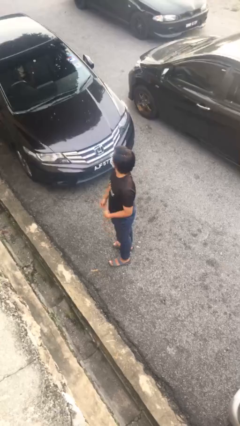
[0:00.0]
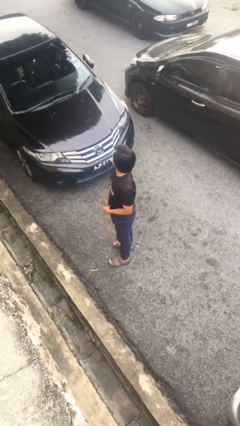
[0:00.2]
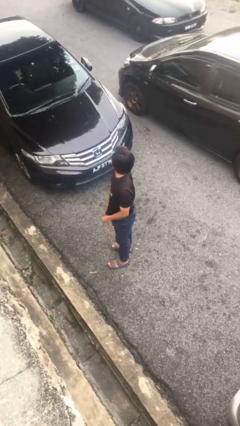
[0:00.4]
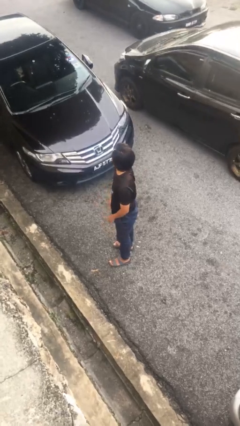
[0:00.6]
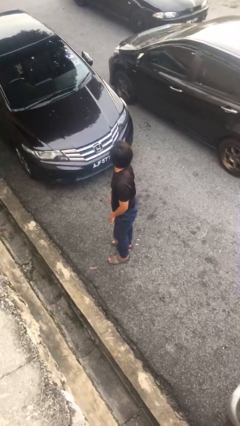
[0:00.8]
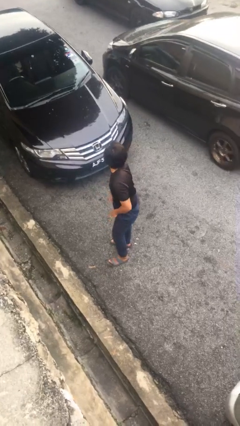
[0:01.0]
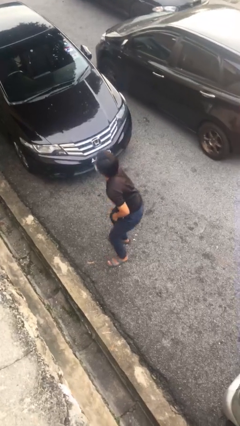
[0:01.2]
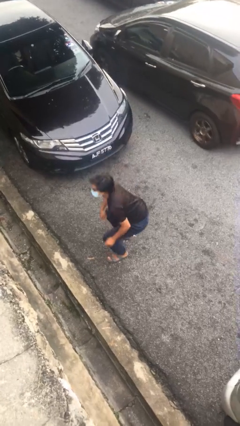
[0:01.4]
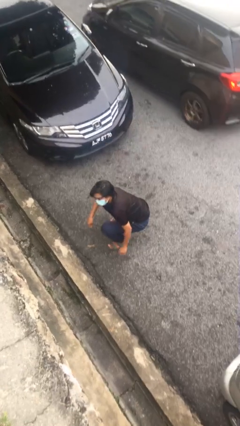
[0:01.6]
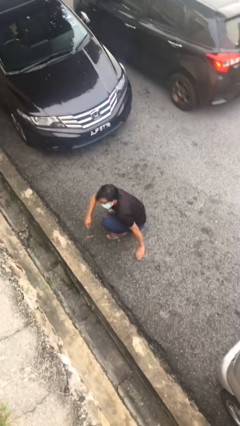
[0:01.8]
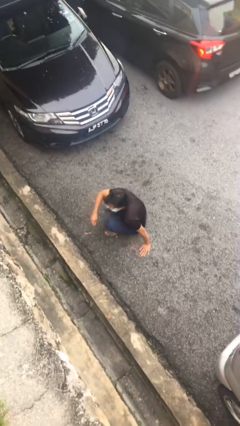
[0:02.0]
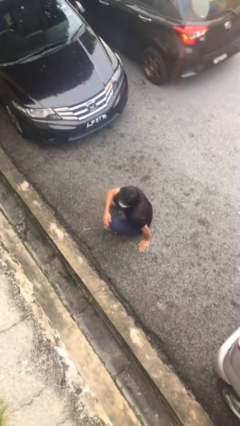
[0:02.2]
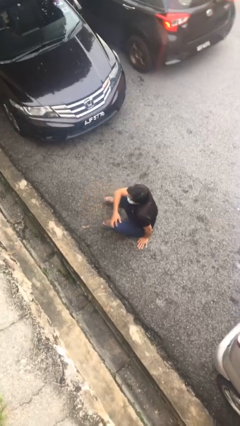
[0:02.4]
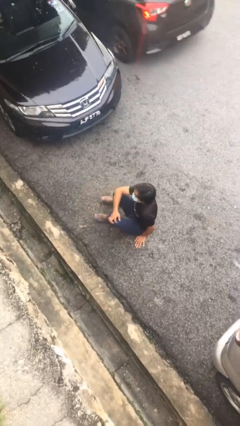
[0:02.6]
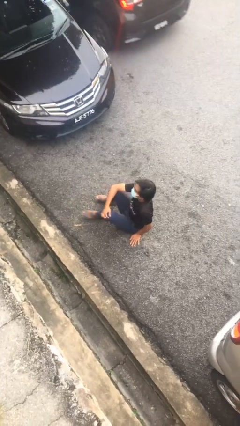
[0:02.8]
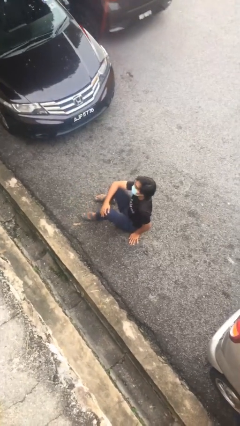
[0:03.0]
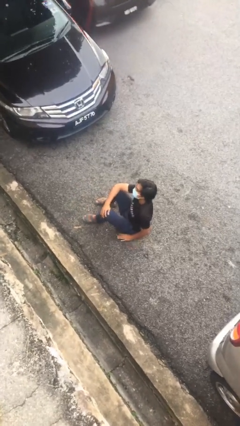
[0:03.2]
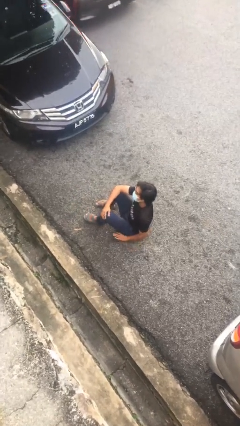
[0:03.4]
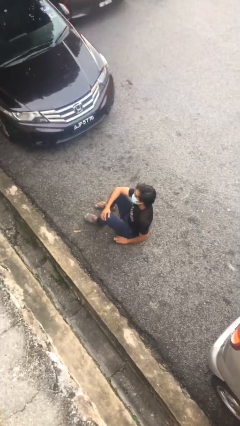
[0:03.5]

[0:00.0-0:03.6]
person sits down

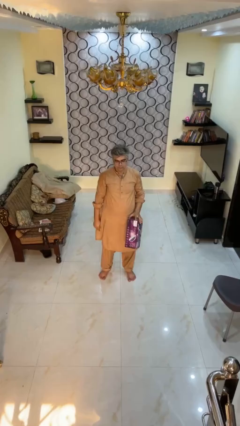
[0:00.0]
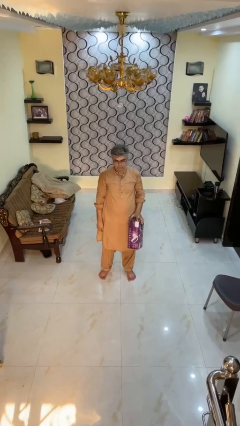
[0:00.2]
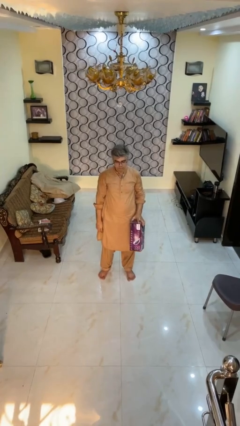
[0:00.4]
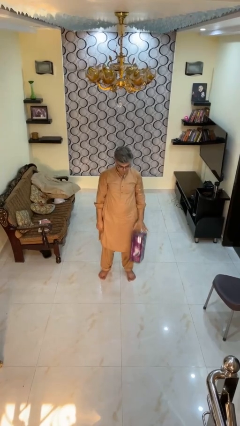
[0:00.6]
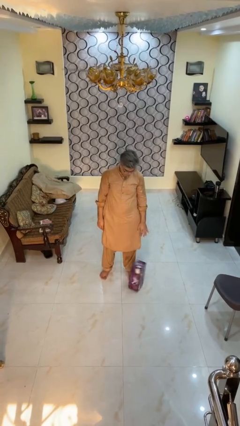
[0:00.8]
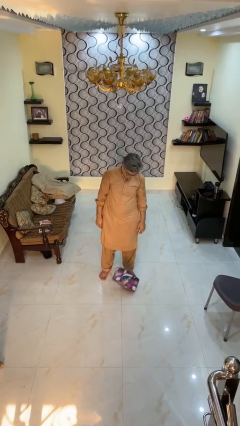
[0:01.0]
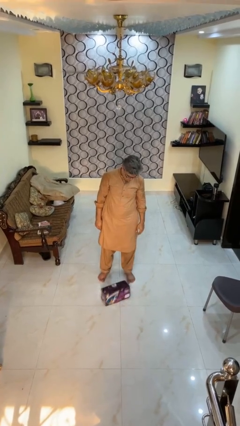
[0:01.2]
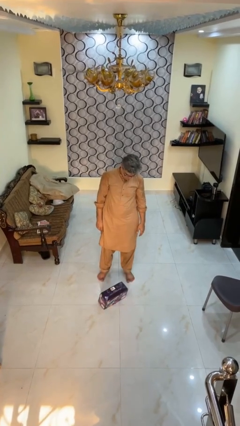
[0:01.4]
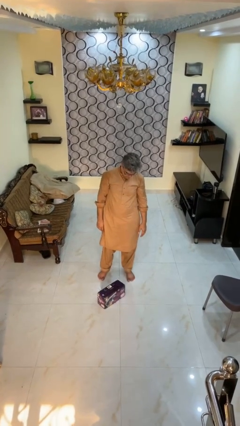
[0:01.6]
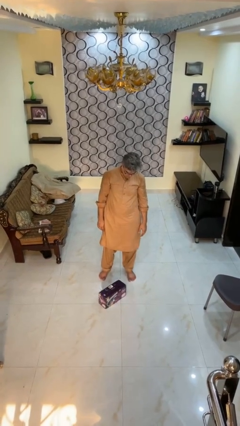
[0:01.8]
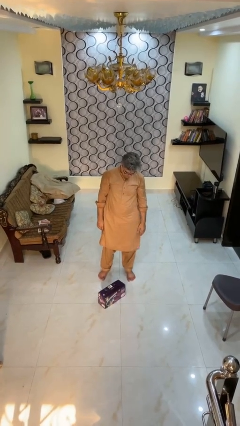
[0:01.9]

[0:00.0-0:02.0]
person drops object

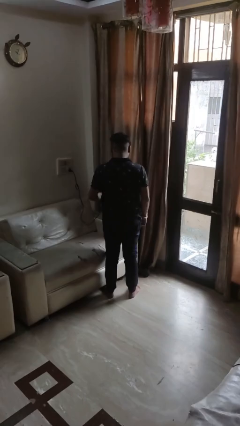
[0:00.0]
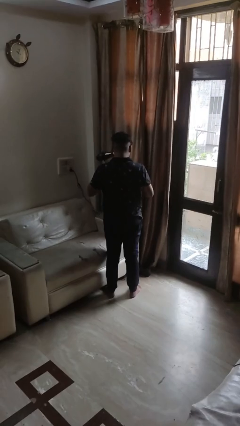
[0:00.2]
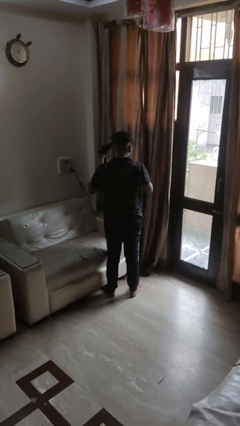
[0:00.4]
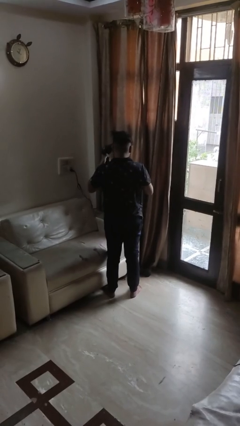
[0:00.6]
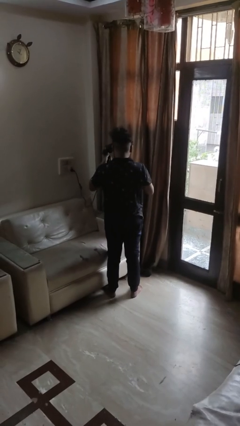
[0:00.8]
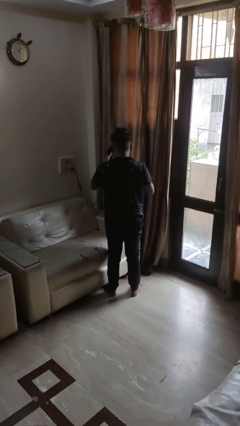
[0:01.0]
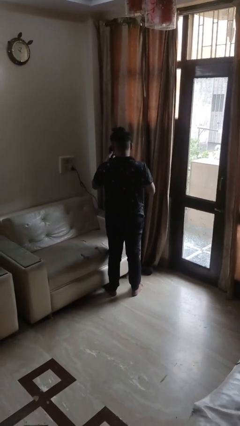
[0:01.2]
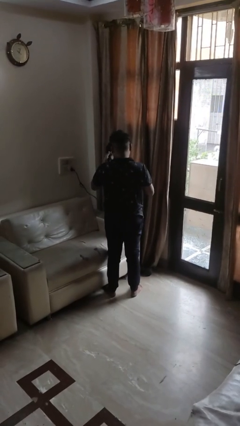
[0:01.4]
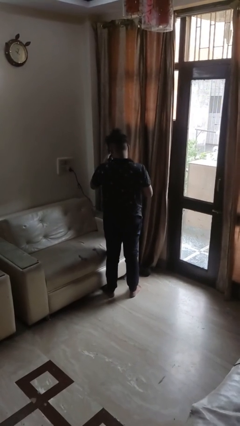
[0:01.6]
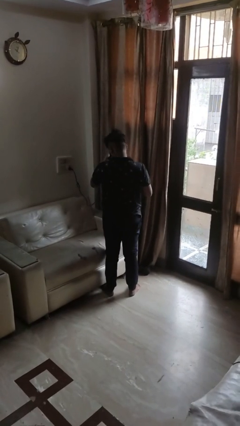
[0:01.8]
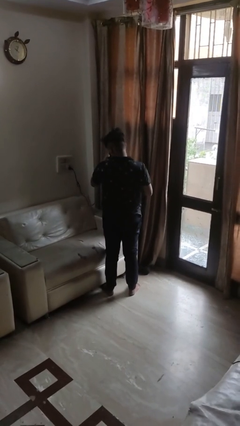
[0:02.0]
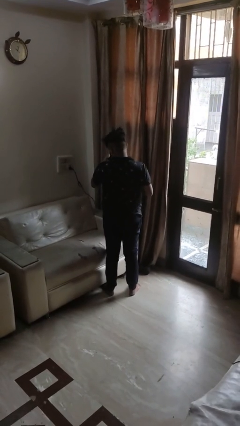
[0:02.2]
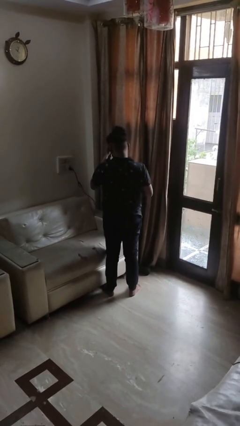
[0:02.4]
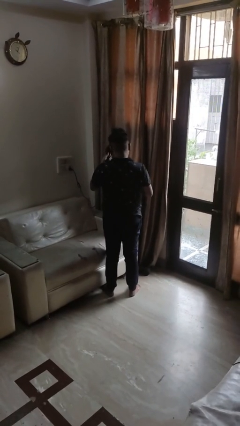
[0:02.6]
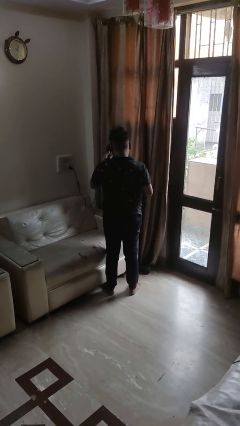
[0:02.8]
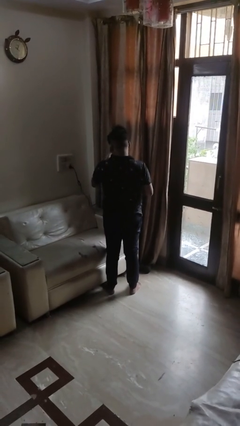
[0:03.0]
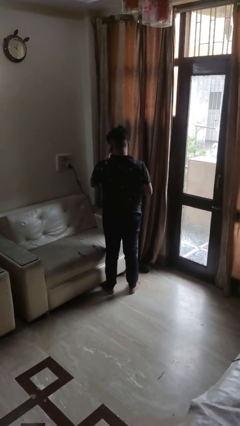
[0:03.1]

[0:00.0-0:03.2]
person dries hair with hairdryer

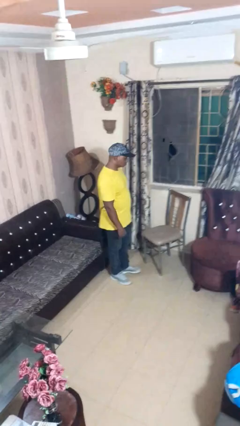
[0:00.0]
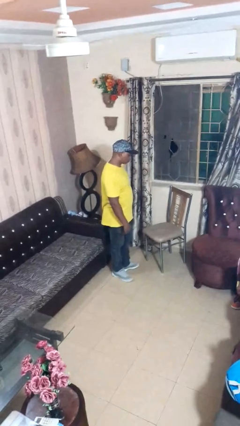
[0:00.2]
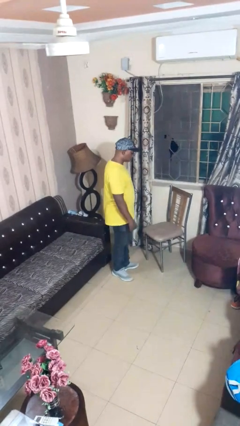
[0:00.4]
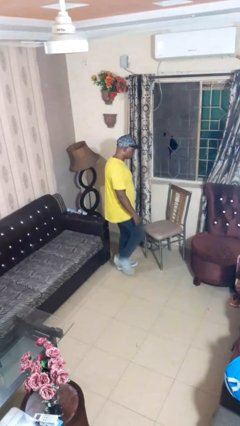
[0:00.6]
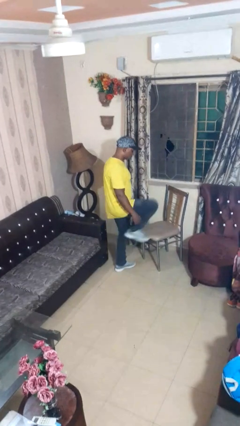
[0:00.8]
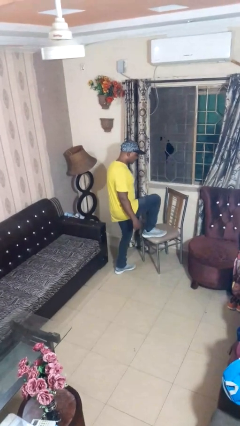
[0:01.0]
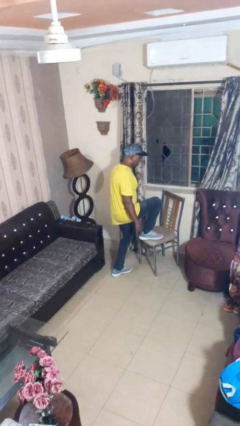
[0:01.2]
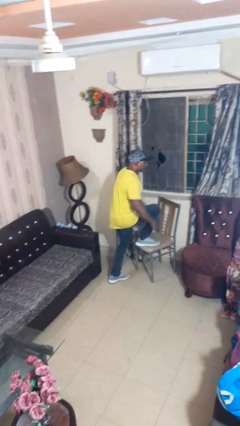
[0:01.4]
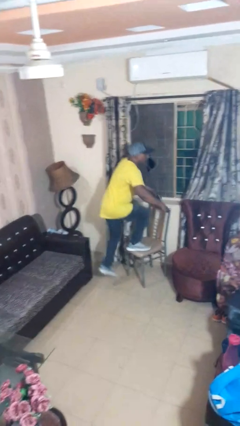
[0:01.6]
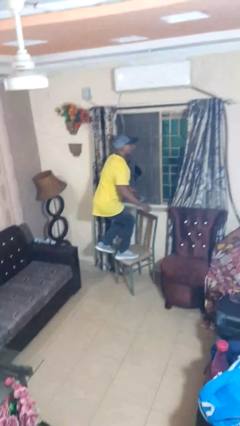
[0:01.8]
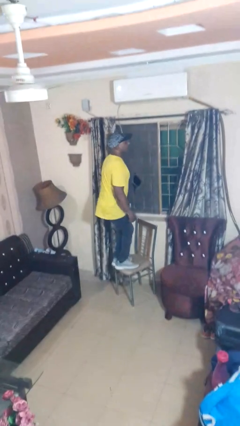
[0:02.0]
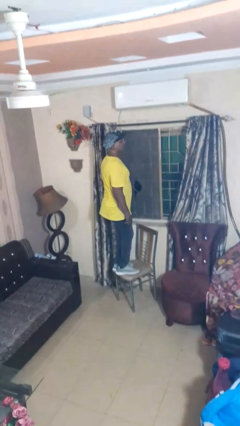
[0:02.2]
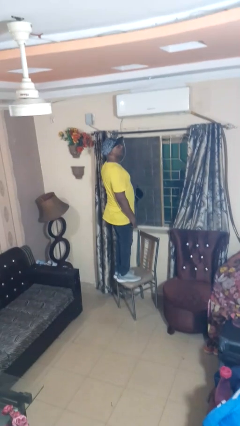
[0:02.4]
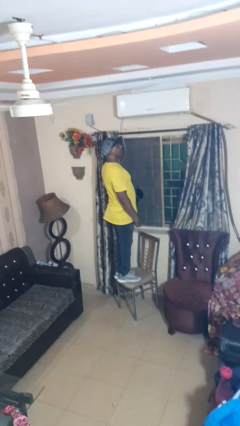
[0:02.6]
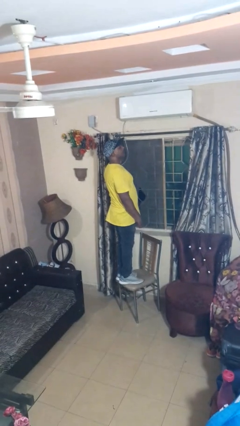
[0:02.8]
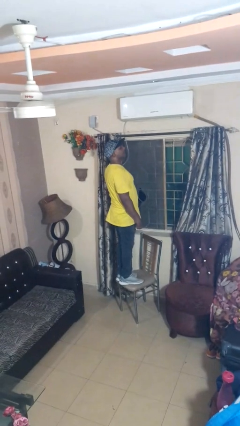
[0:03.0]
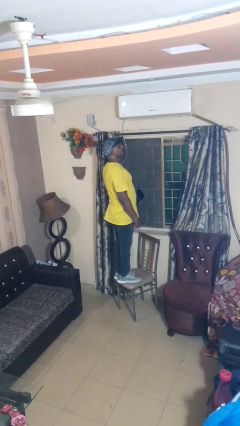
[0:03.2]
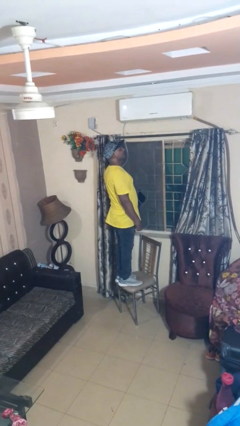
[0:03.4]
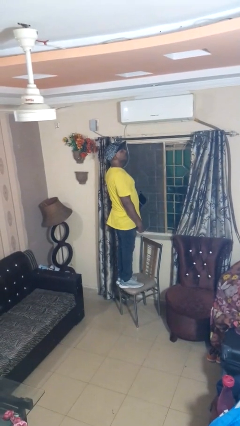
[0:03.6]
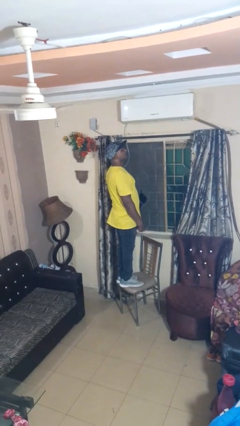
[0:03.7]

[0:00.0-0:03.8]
person climbs on chair

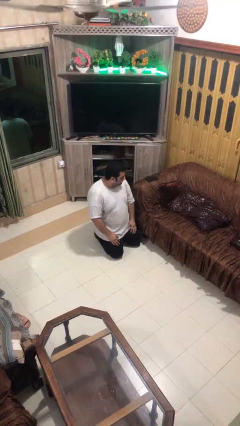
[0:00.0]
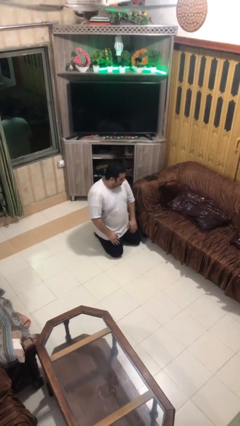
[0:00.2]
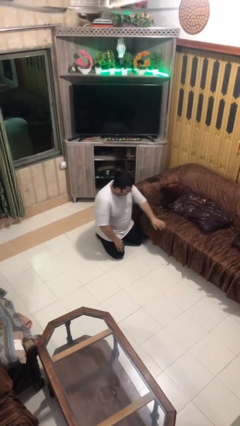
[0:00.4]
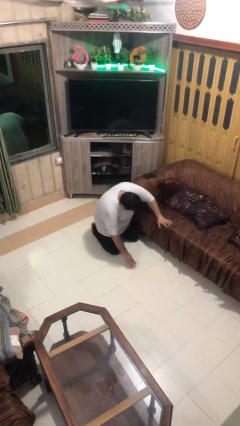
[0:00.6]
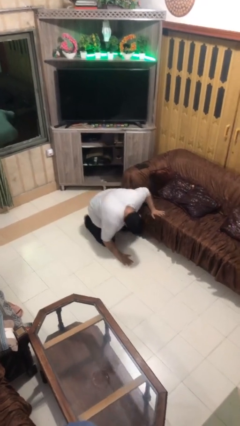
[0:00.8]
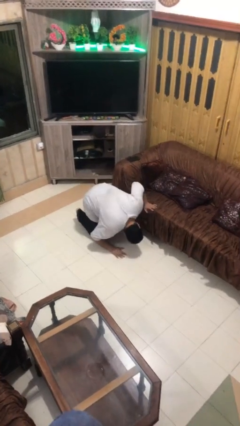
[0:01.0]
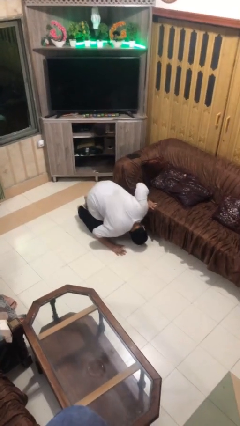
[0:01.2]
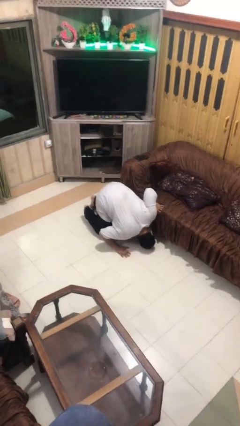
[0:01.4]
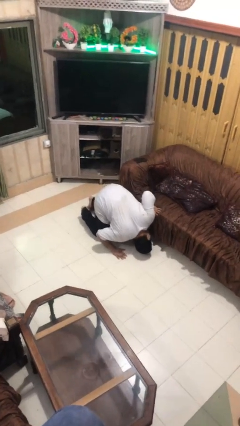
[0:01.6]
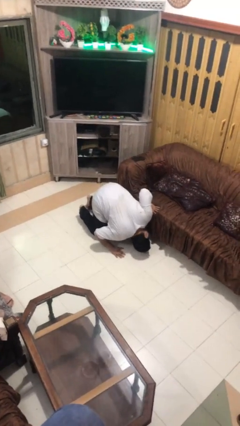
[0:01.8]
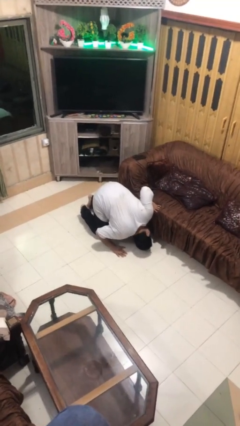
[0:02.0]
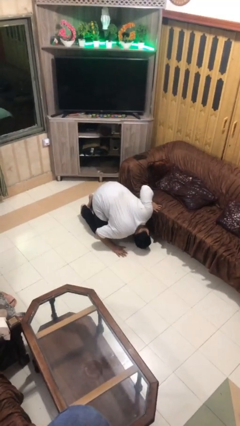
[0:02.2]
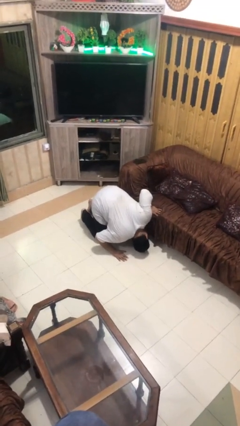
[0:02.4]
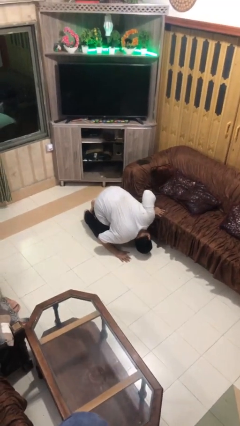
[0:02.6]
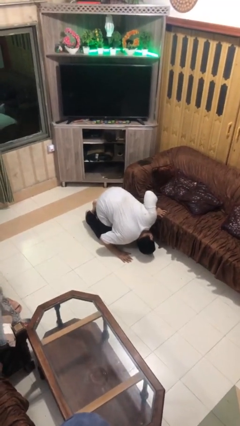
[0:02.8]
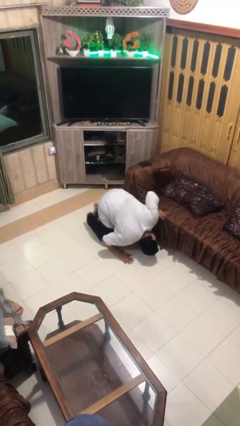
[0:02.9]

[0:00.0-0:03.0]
person searches under couch

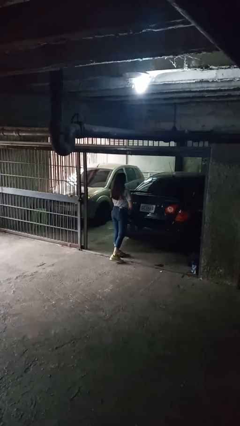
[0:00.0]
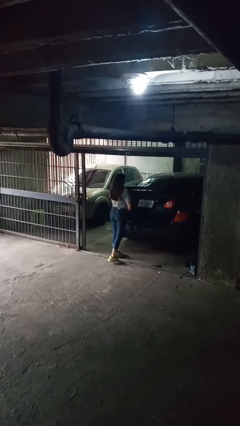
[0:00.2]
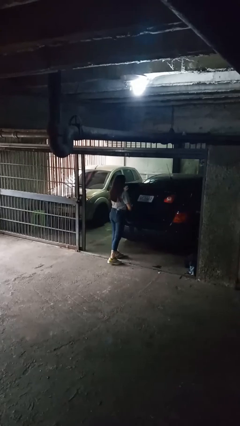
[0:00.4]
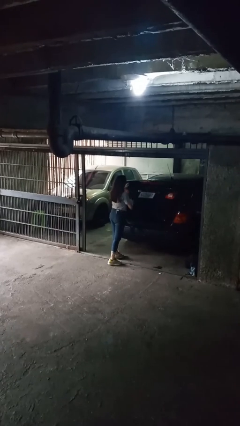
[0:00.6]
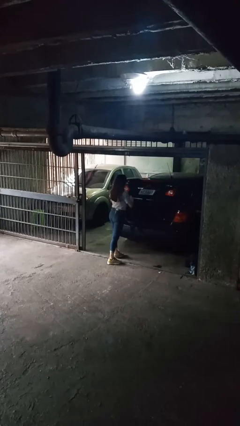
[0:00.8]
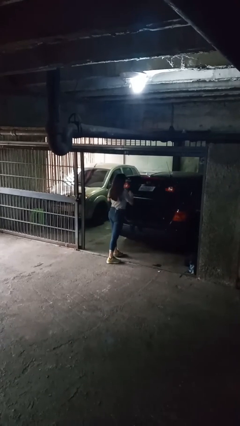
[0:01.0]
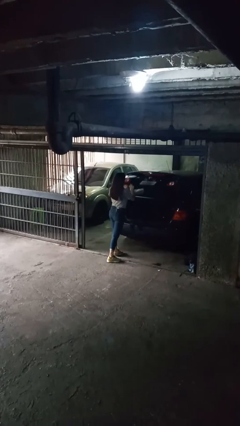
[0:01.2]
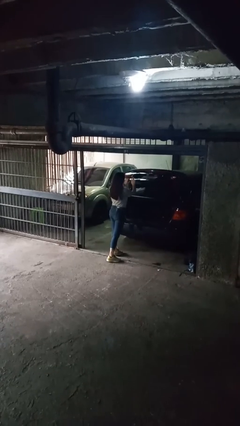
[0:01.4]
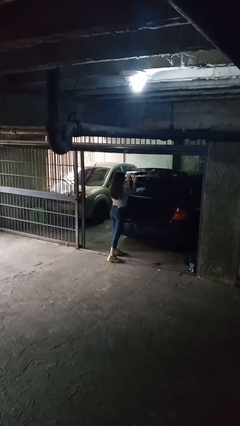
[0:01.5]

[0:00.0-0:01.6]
person opens car trunk

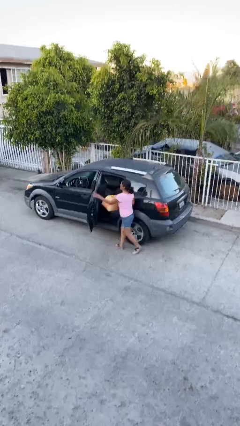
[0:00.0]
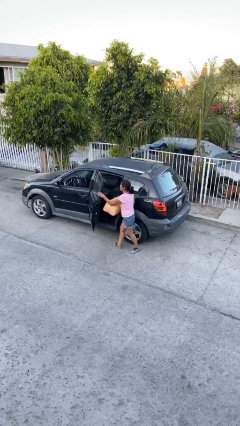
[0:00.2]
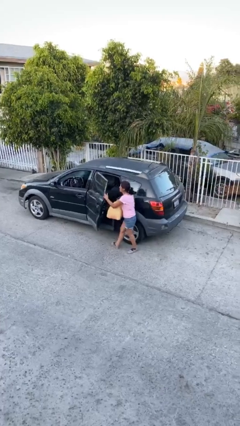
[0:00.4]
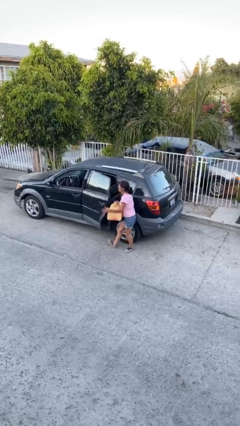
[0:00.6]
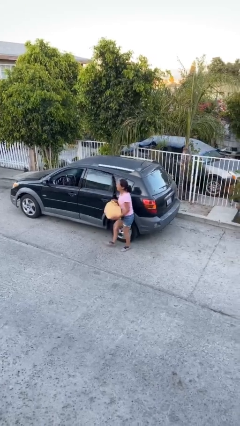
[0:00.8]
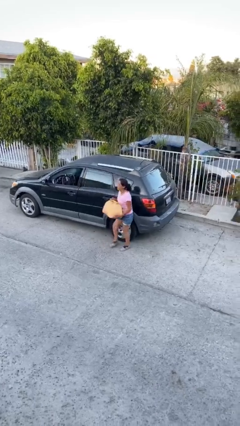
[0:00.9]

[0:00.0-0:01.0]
person closes car door
